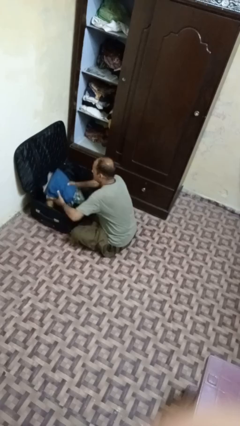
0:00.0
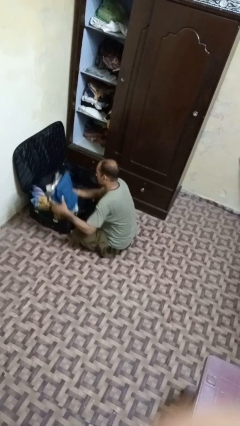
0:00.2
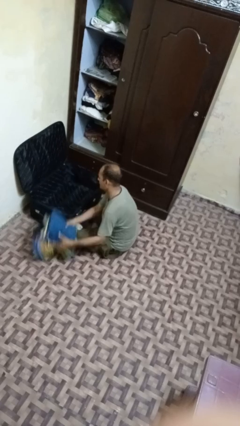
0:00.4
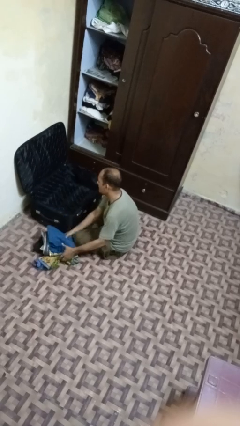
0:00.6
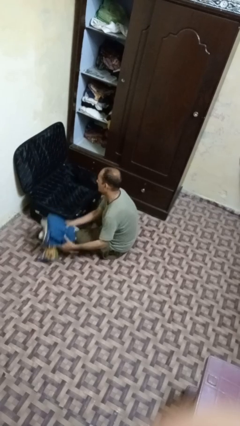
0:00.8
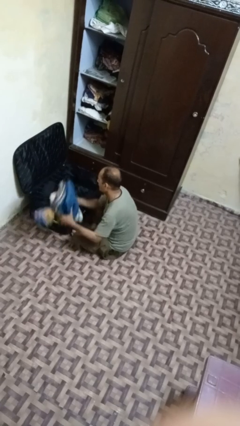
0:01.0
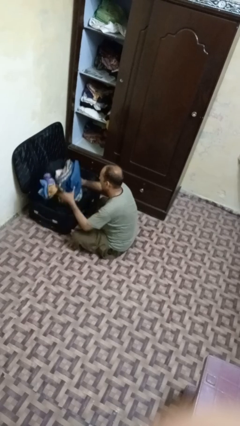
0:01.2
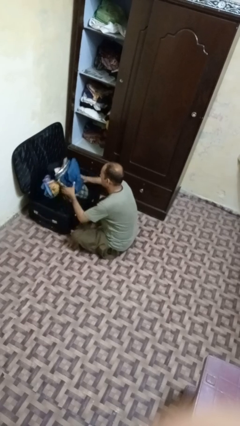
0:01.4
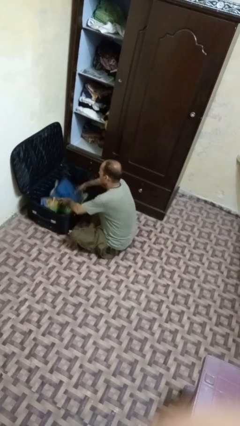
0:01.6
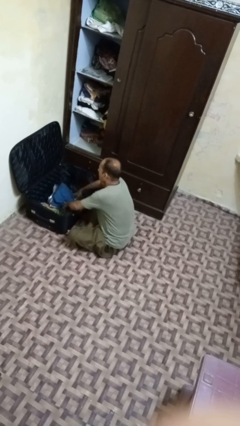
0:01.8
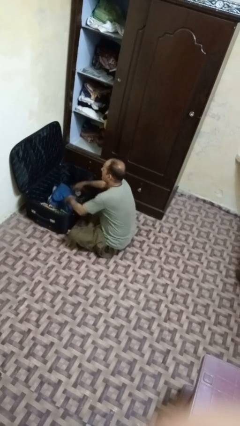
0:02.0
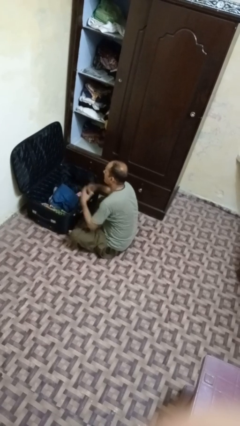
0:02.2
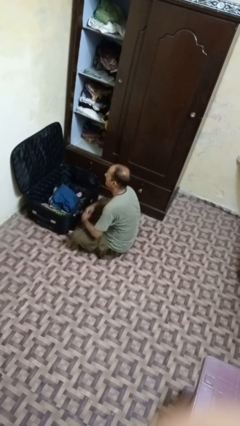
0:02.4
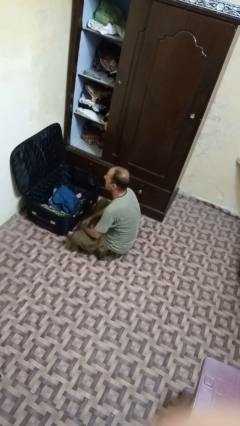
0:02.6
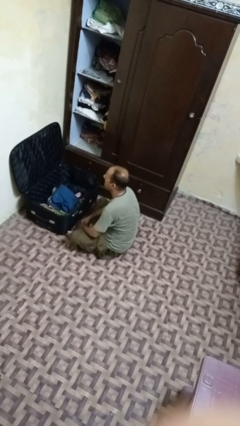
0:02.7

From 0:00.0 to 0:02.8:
person loads clothes into suitcase

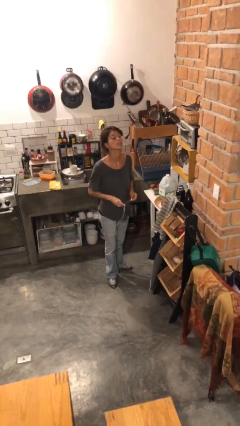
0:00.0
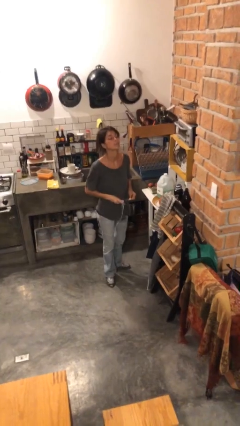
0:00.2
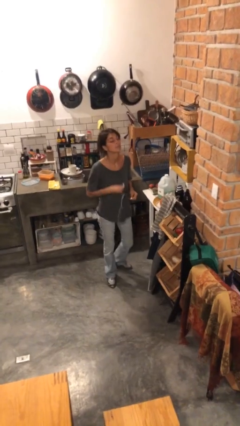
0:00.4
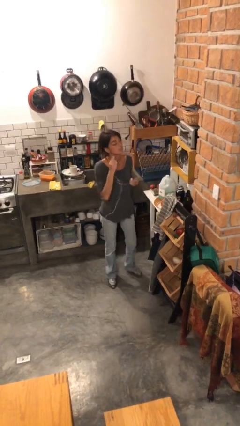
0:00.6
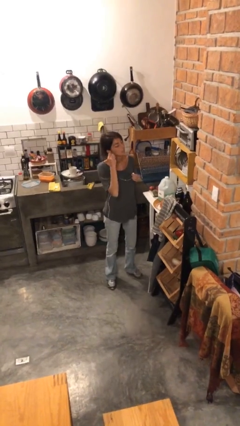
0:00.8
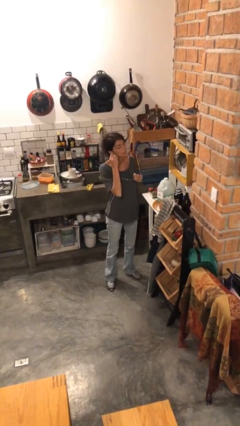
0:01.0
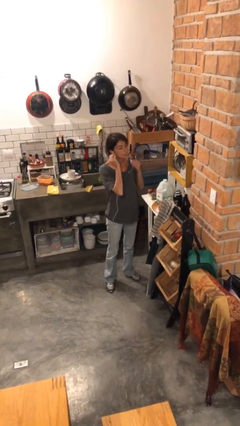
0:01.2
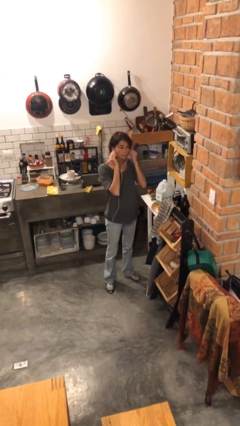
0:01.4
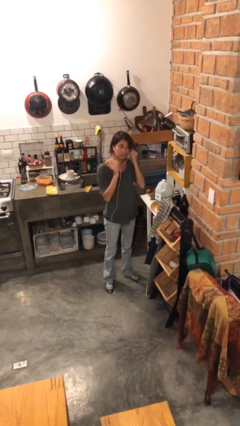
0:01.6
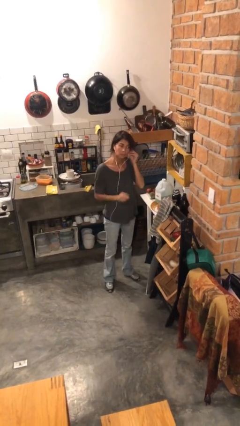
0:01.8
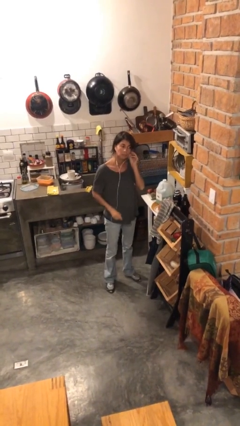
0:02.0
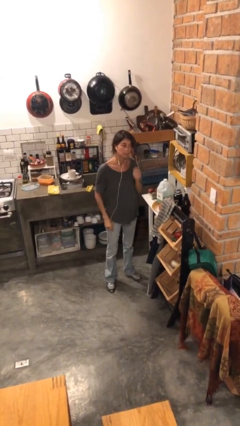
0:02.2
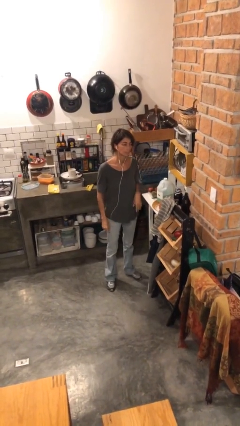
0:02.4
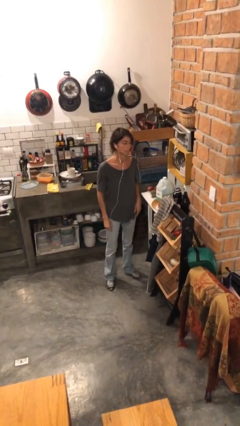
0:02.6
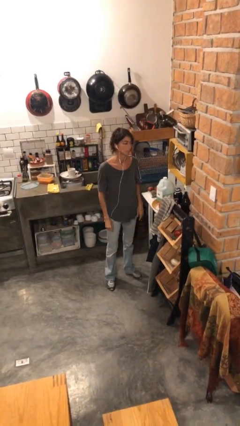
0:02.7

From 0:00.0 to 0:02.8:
person puts on headphones

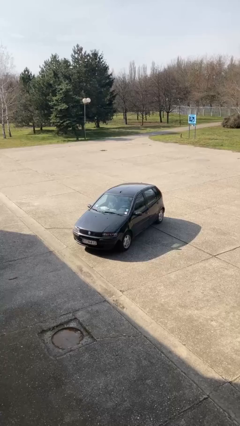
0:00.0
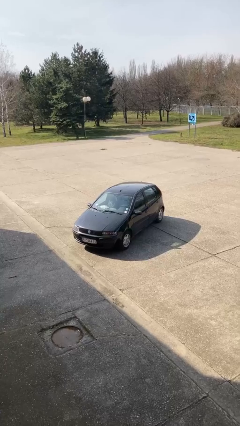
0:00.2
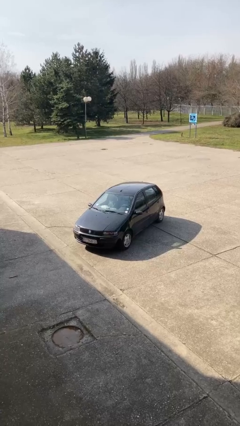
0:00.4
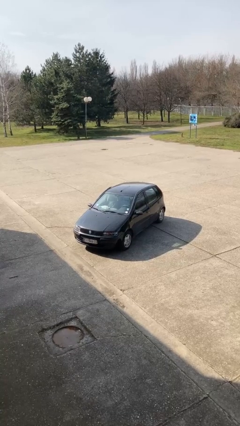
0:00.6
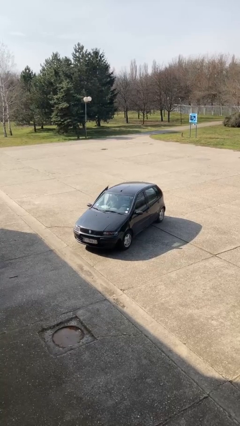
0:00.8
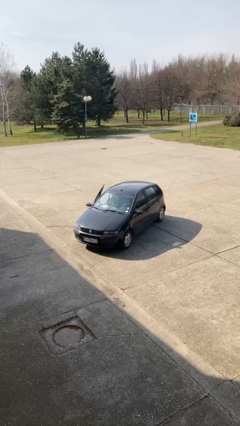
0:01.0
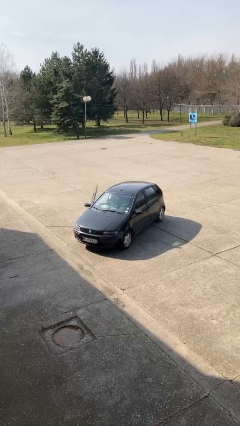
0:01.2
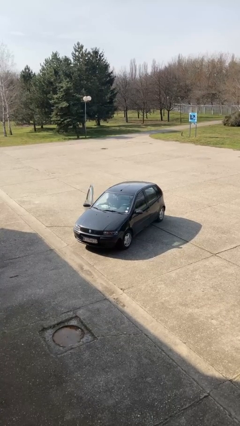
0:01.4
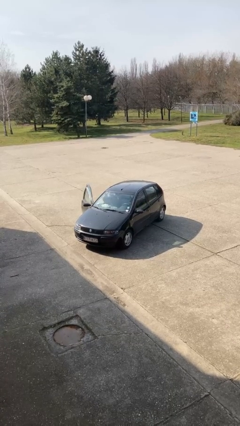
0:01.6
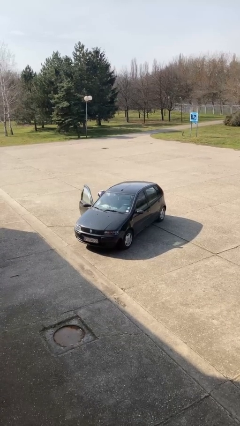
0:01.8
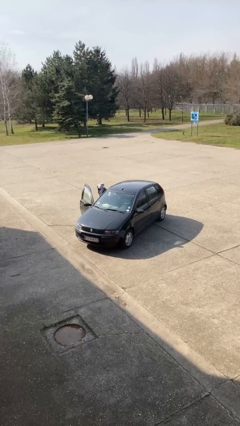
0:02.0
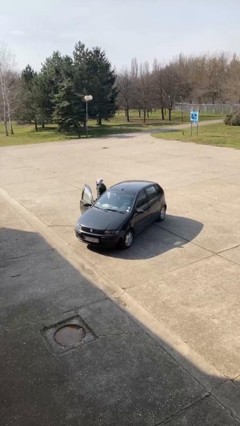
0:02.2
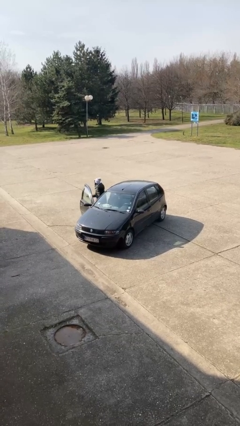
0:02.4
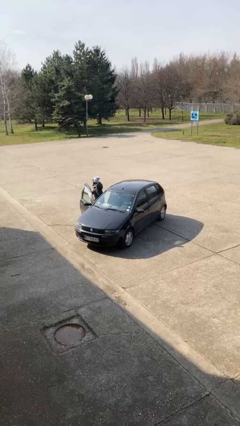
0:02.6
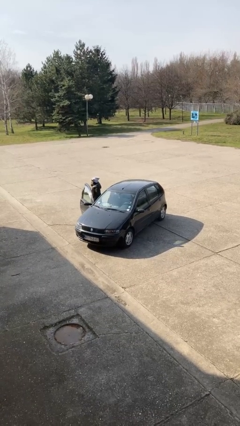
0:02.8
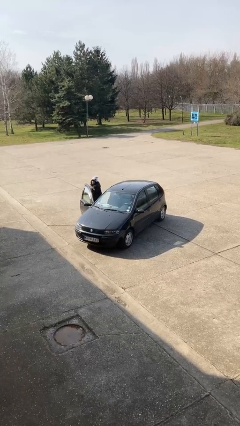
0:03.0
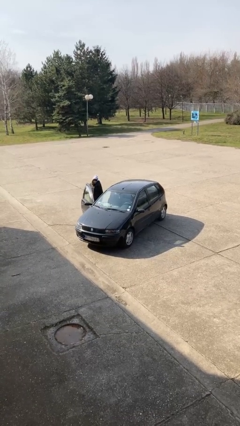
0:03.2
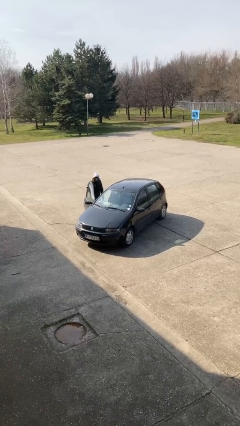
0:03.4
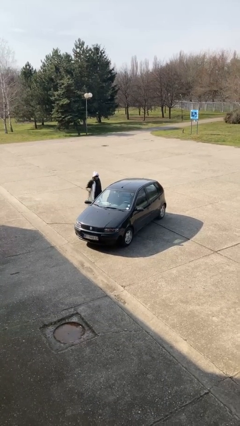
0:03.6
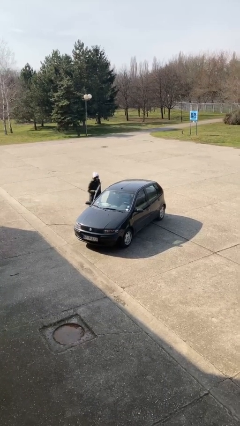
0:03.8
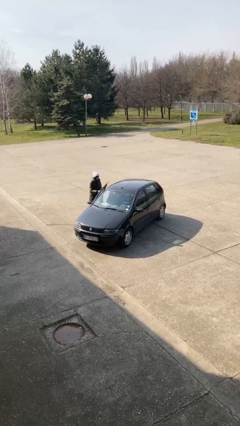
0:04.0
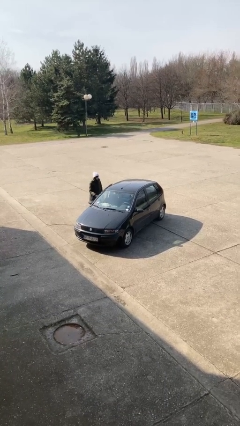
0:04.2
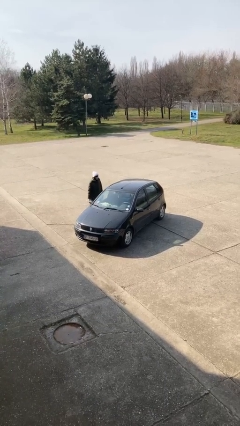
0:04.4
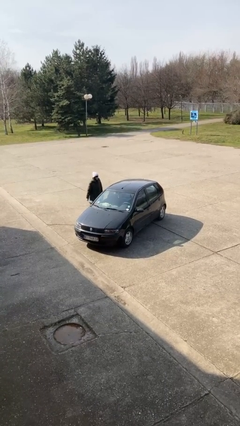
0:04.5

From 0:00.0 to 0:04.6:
car drops off person

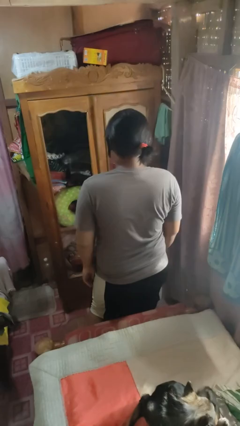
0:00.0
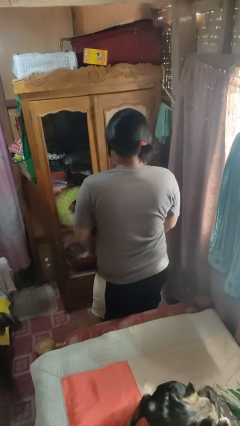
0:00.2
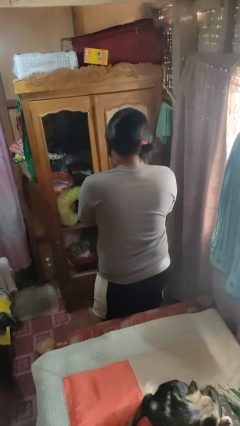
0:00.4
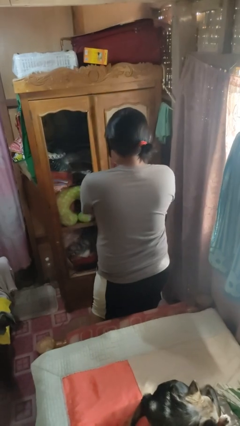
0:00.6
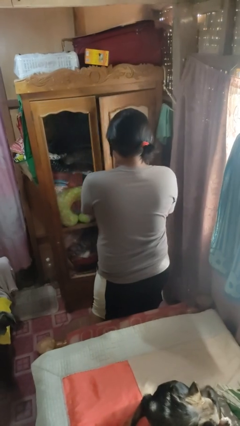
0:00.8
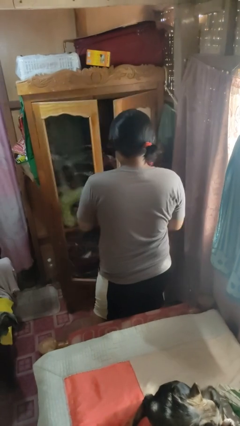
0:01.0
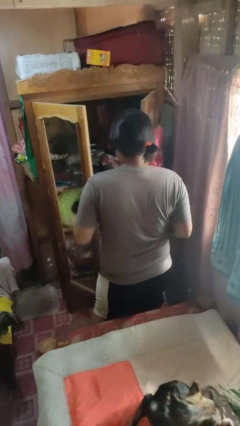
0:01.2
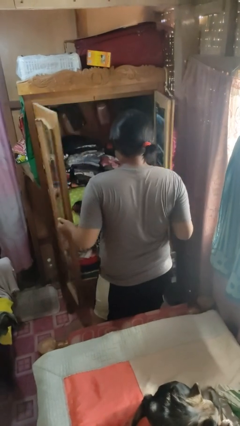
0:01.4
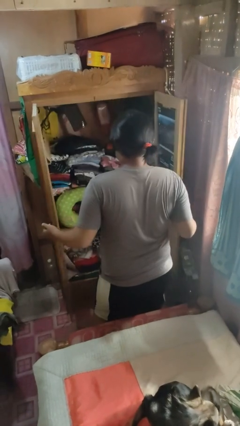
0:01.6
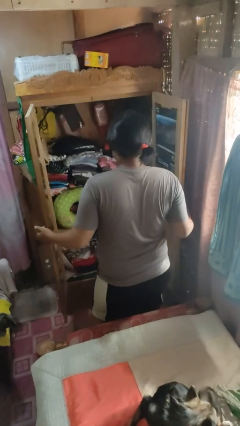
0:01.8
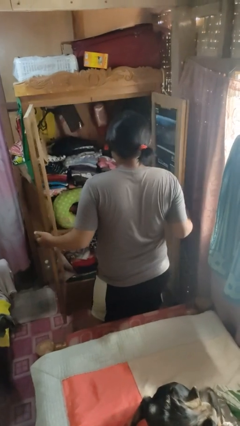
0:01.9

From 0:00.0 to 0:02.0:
person opens closet door

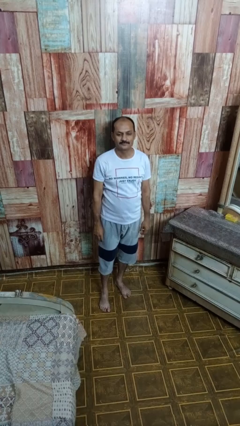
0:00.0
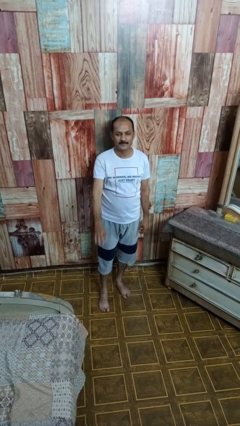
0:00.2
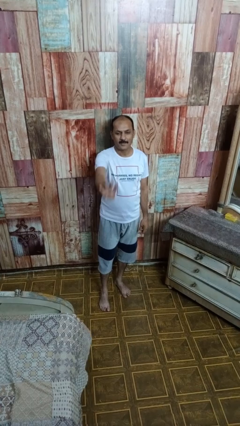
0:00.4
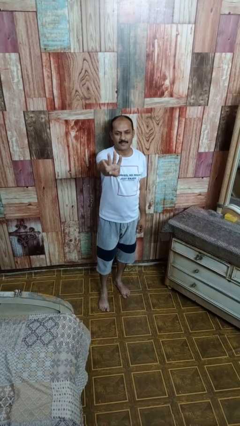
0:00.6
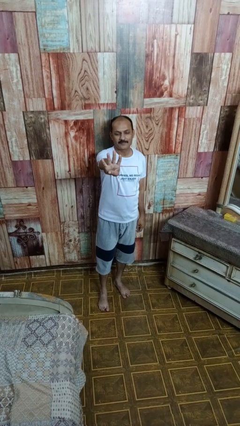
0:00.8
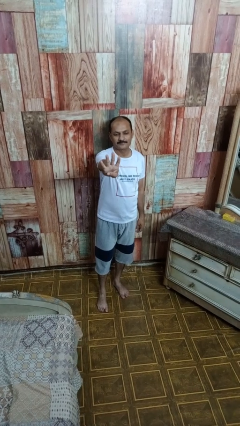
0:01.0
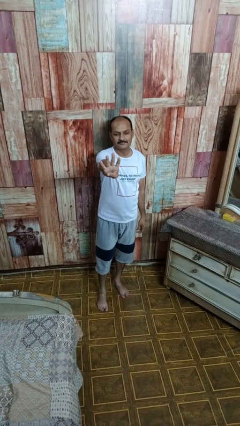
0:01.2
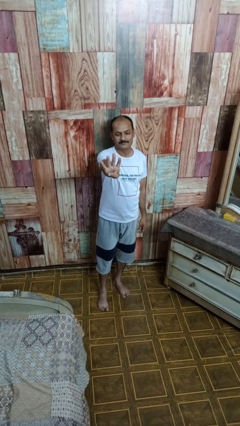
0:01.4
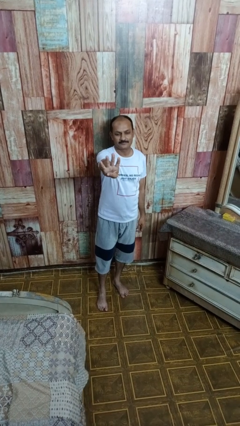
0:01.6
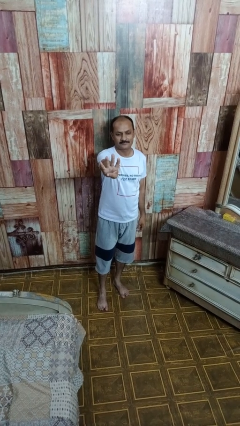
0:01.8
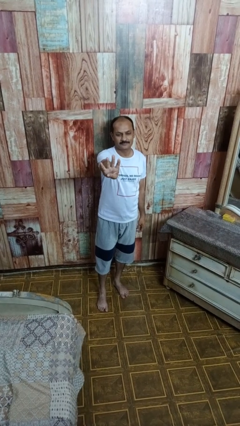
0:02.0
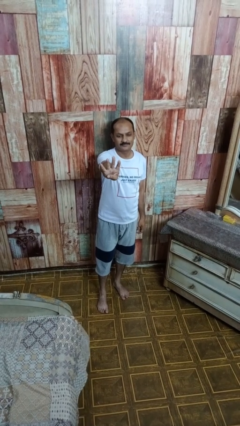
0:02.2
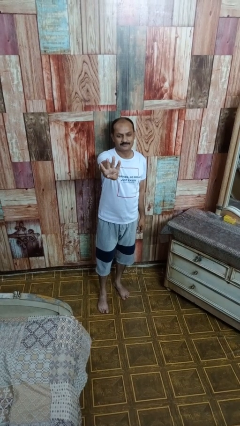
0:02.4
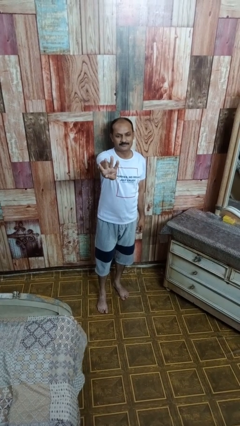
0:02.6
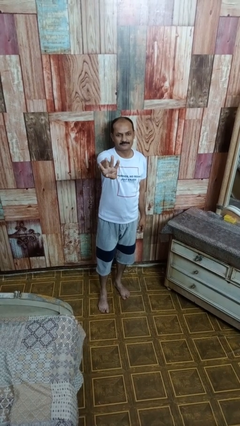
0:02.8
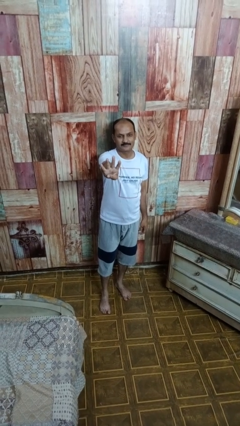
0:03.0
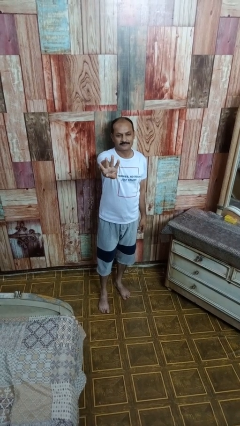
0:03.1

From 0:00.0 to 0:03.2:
person gestures number four

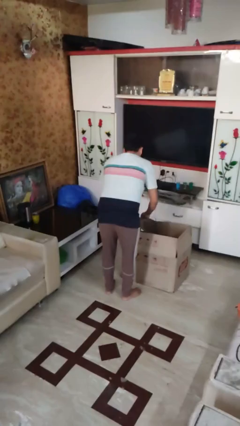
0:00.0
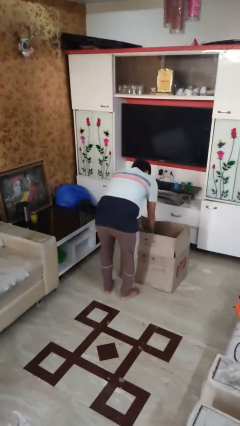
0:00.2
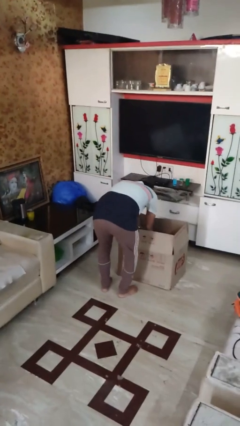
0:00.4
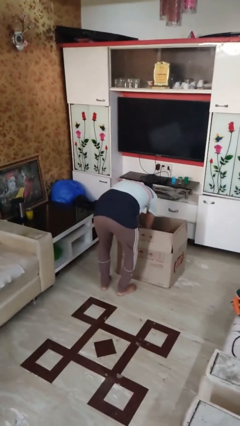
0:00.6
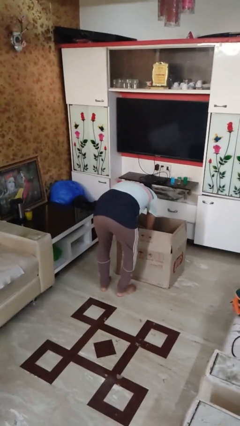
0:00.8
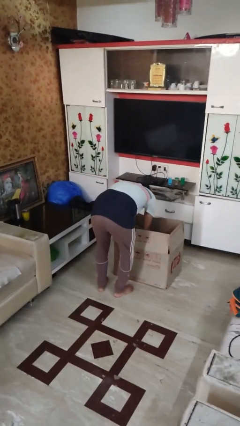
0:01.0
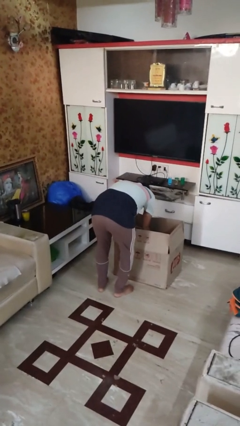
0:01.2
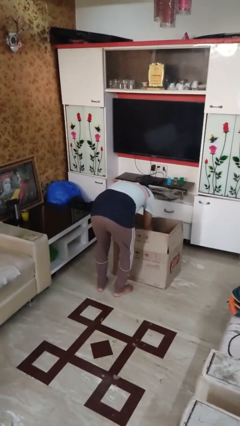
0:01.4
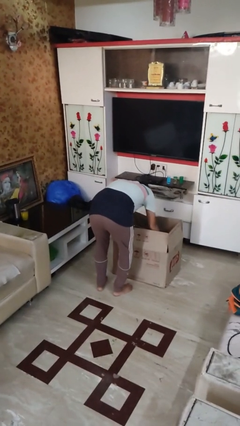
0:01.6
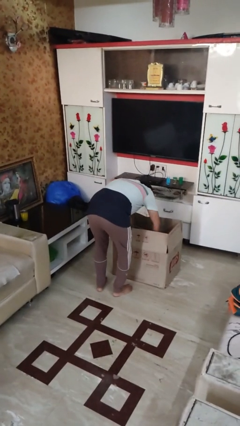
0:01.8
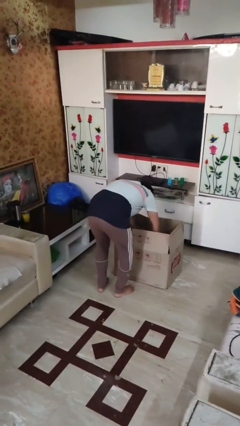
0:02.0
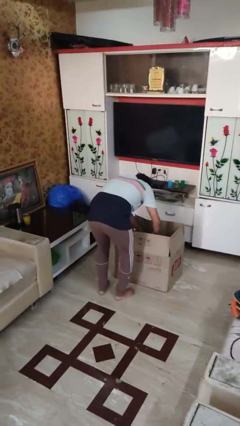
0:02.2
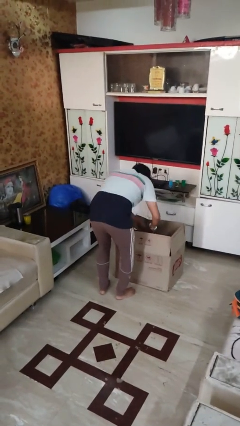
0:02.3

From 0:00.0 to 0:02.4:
person searches in box
